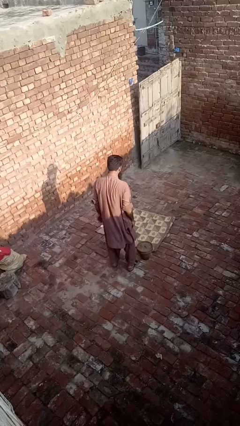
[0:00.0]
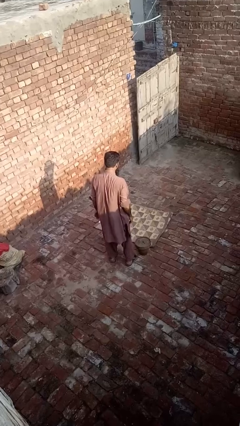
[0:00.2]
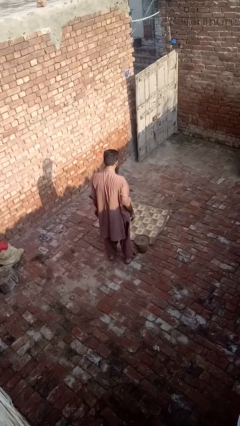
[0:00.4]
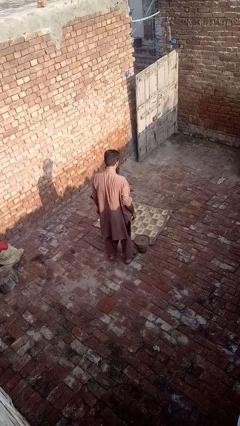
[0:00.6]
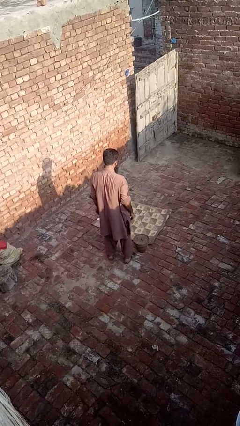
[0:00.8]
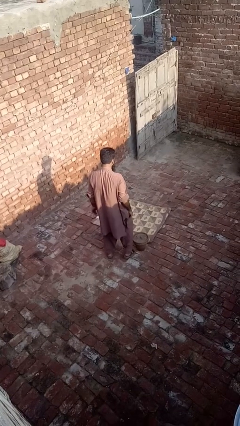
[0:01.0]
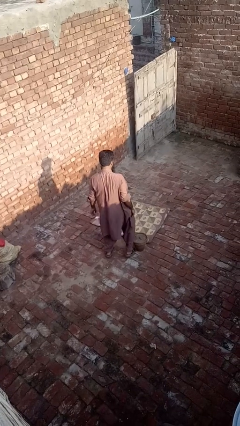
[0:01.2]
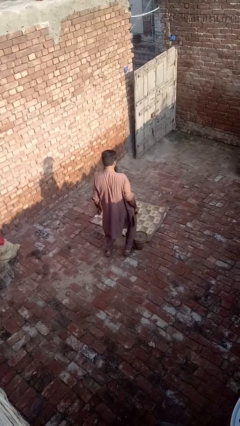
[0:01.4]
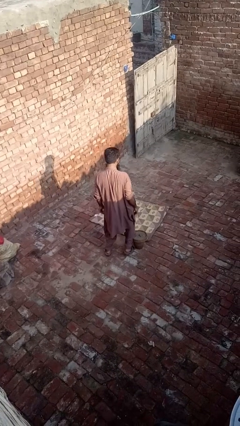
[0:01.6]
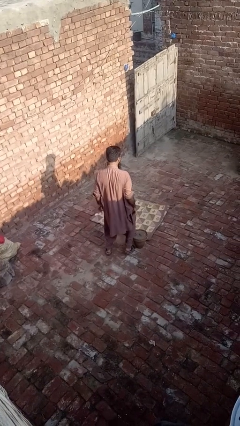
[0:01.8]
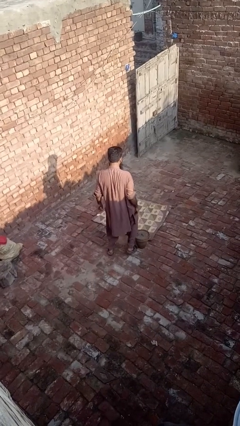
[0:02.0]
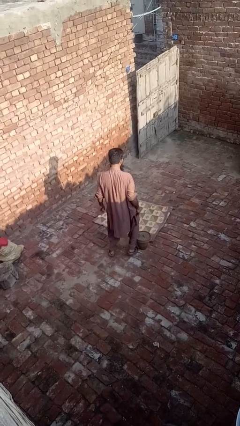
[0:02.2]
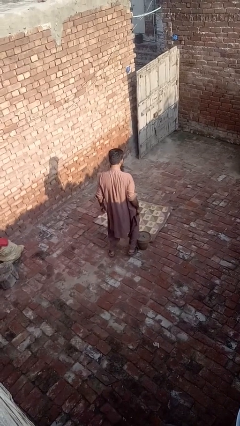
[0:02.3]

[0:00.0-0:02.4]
person trips on object on floor

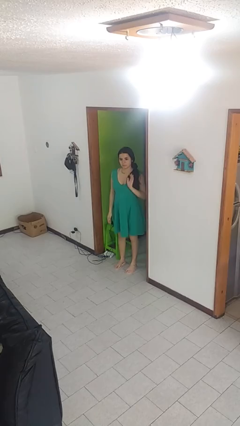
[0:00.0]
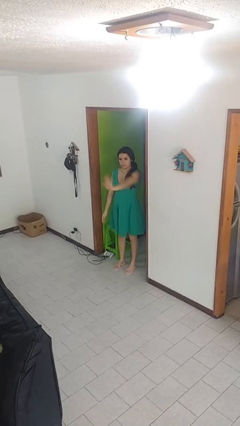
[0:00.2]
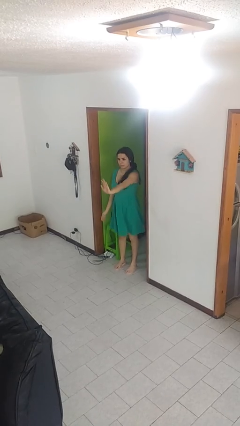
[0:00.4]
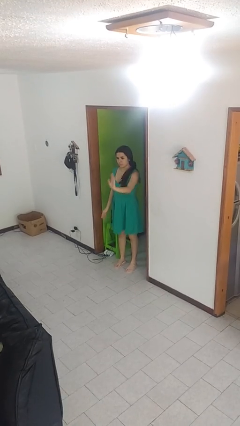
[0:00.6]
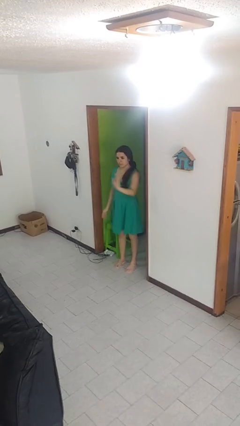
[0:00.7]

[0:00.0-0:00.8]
person gestures stop

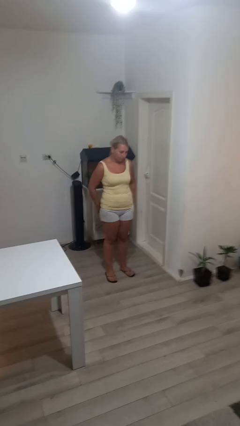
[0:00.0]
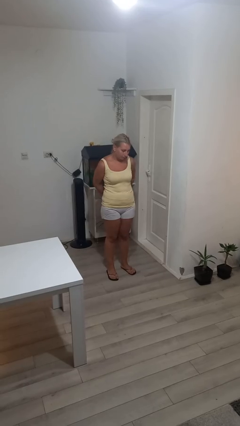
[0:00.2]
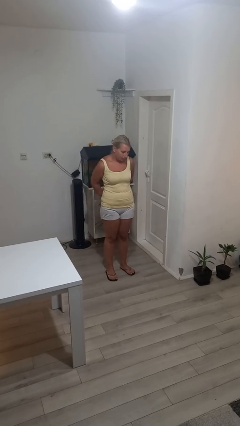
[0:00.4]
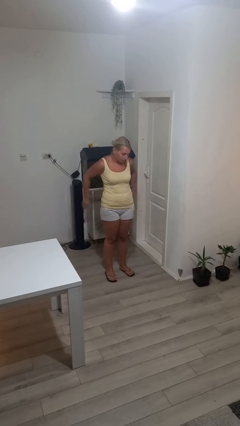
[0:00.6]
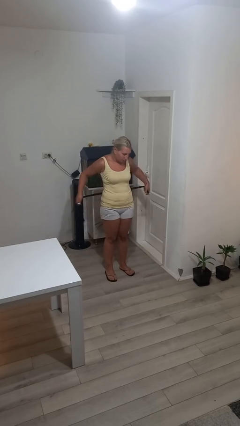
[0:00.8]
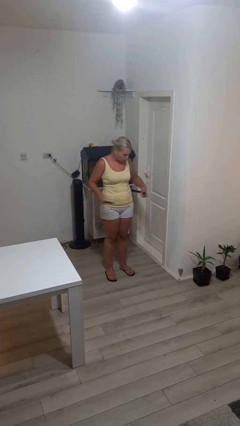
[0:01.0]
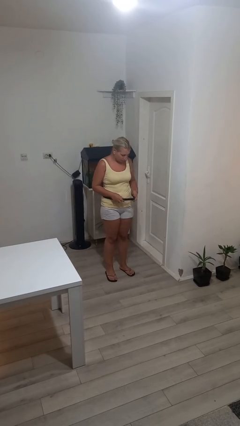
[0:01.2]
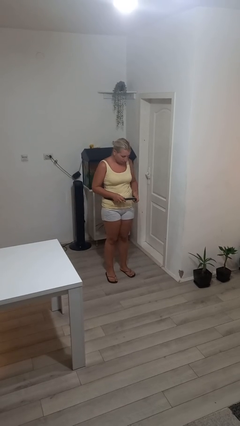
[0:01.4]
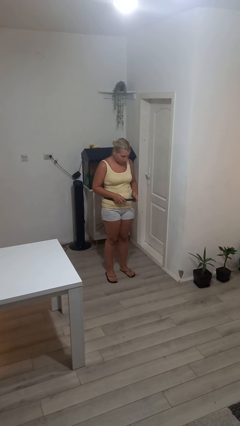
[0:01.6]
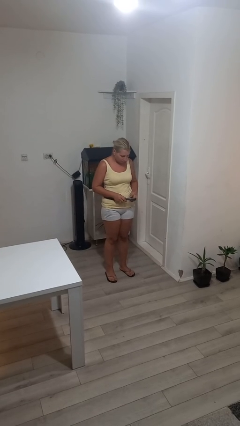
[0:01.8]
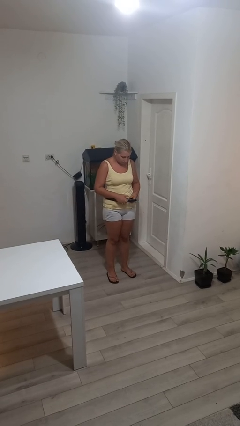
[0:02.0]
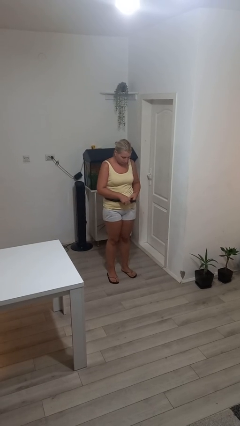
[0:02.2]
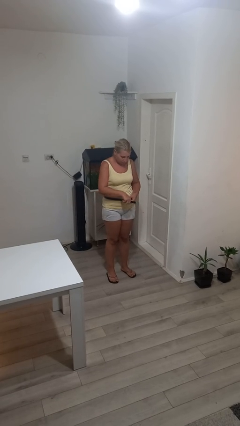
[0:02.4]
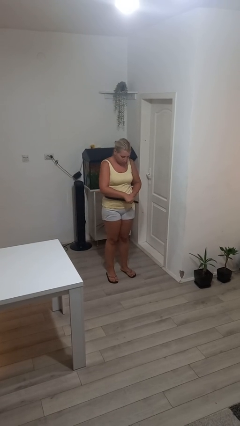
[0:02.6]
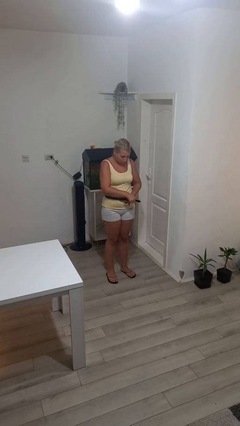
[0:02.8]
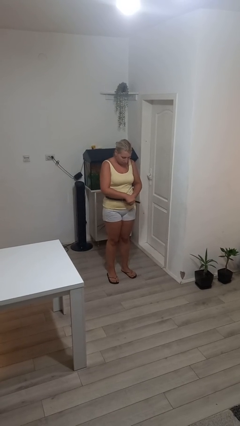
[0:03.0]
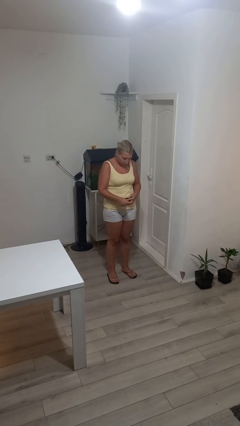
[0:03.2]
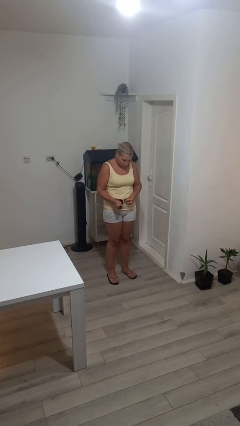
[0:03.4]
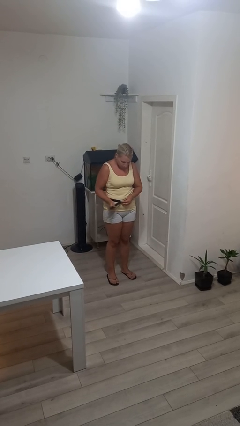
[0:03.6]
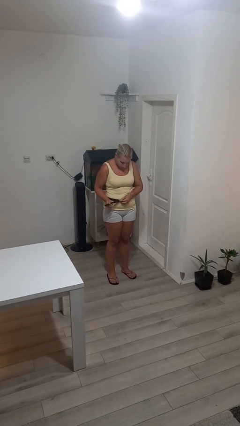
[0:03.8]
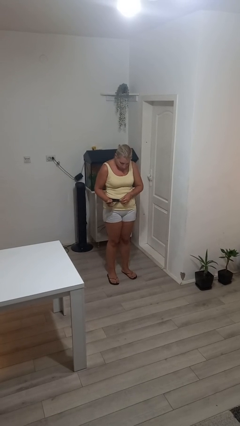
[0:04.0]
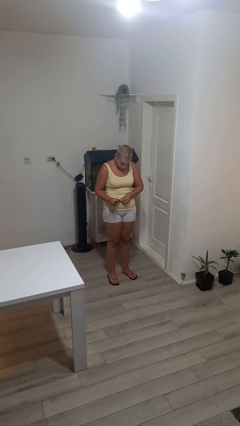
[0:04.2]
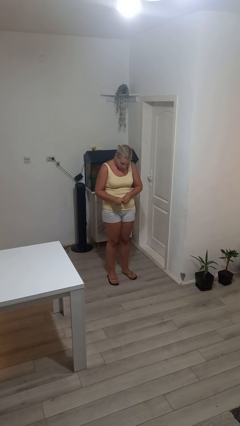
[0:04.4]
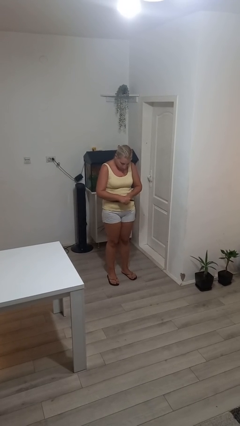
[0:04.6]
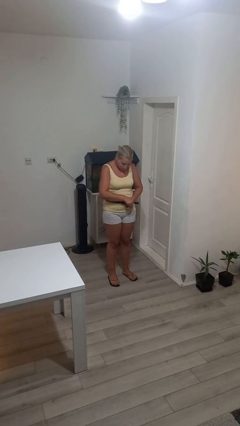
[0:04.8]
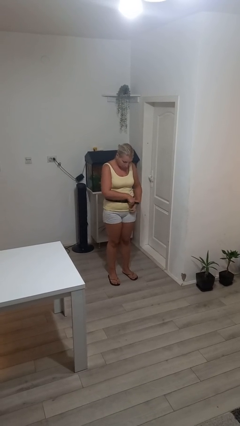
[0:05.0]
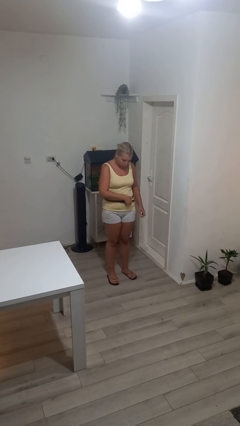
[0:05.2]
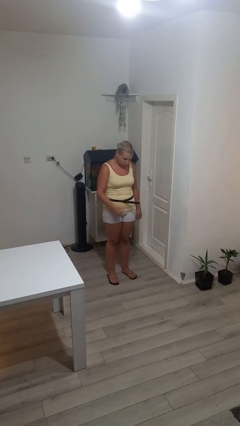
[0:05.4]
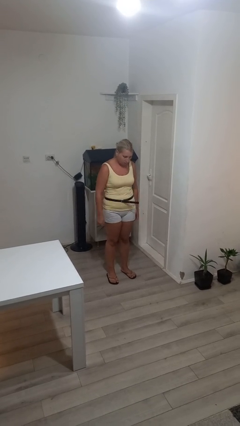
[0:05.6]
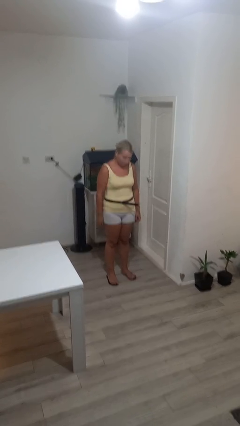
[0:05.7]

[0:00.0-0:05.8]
person puts on belt

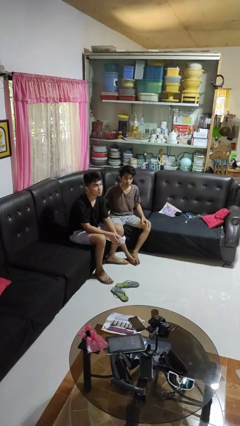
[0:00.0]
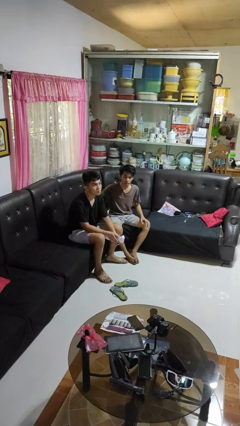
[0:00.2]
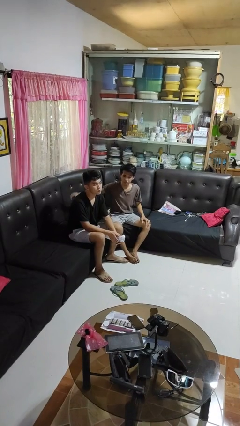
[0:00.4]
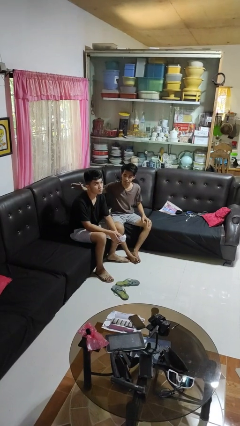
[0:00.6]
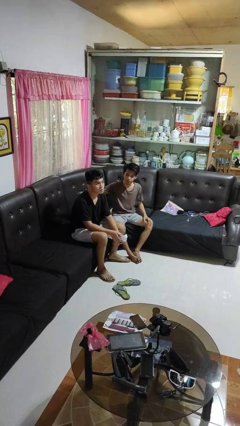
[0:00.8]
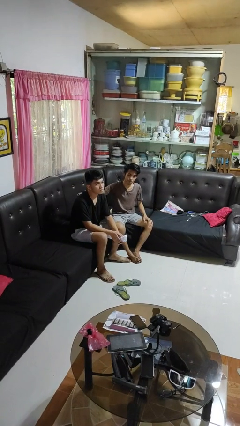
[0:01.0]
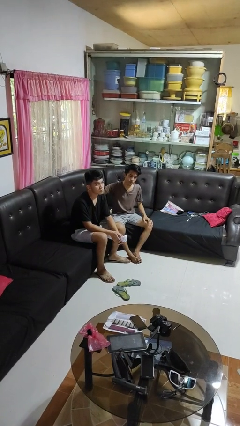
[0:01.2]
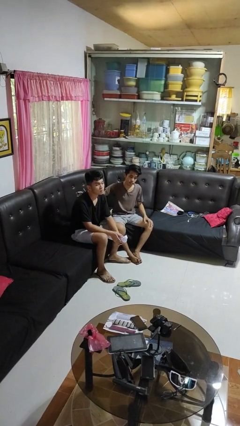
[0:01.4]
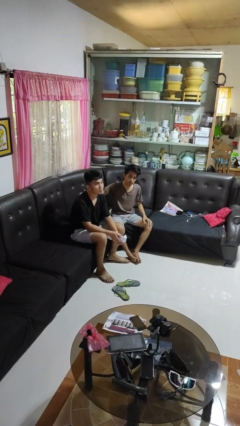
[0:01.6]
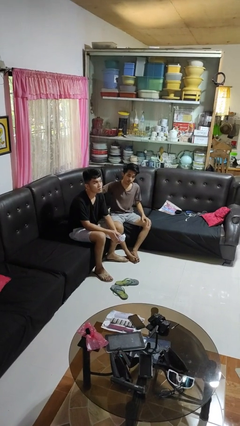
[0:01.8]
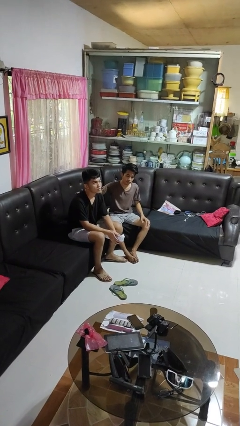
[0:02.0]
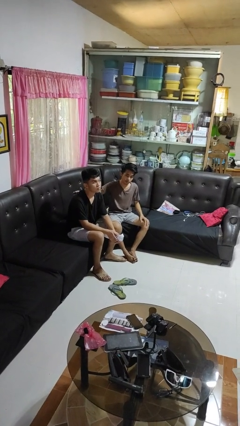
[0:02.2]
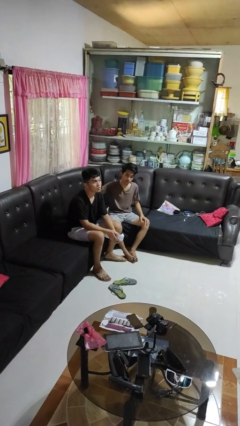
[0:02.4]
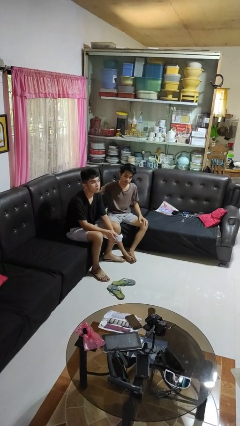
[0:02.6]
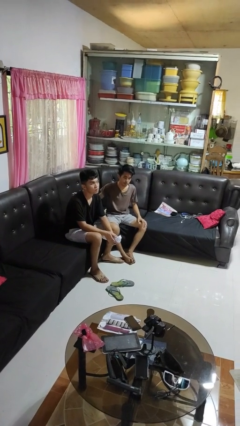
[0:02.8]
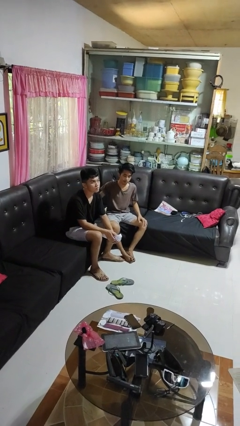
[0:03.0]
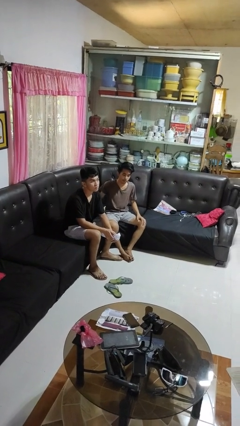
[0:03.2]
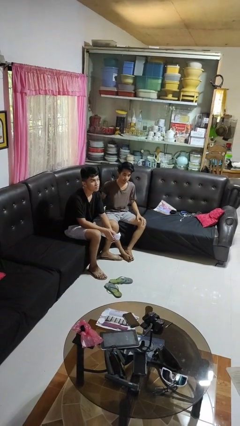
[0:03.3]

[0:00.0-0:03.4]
person touches back of person

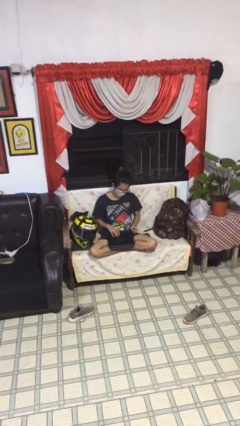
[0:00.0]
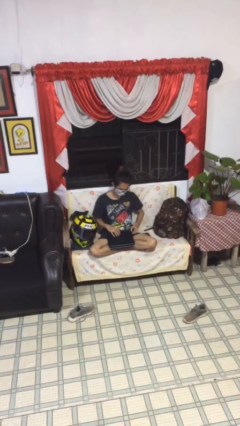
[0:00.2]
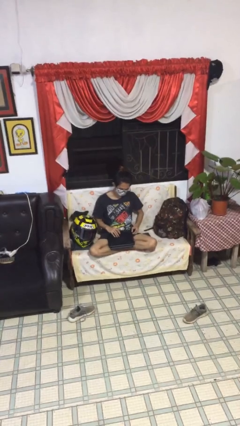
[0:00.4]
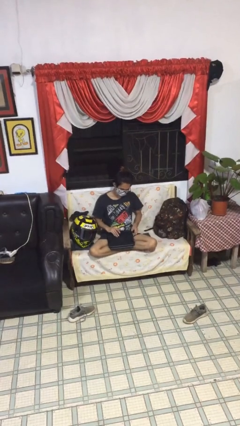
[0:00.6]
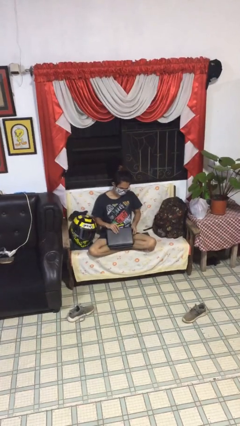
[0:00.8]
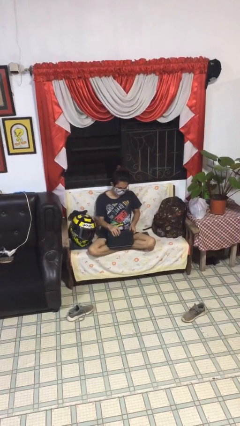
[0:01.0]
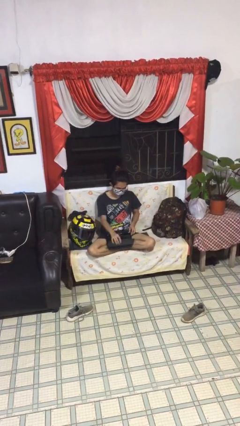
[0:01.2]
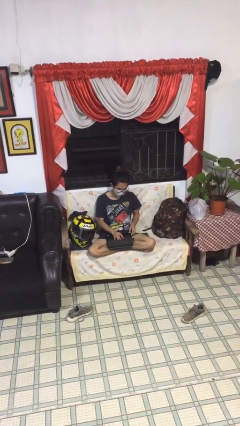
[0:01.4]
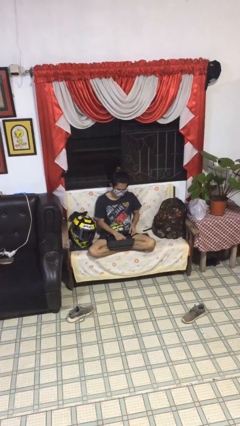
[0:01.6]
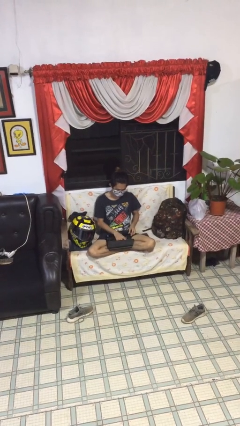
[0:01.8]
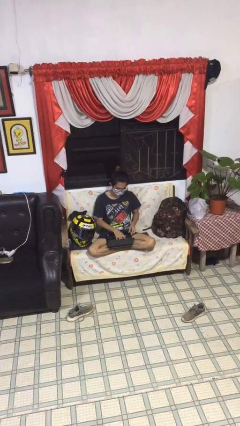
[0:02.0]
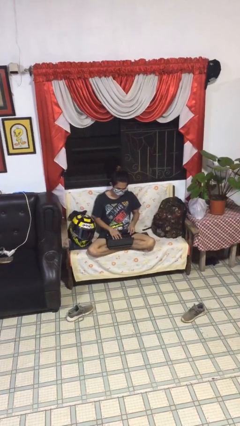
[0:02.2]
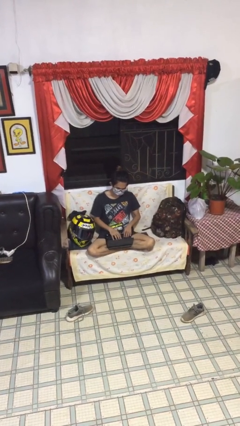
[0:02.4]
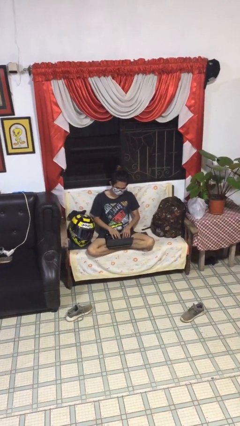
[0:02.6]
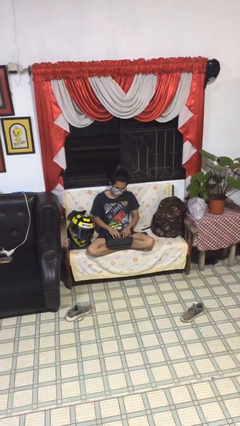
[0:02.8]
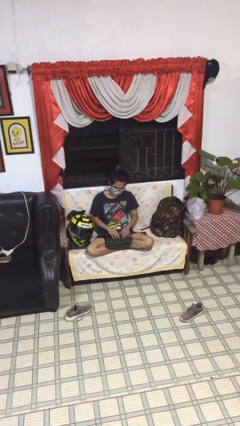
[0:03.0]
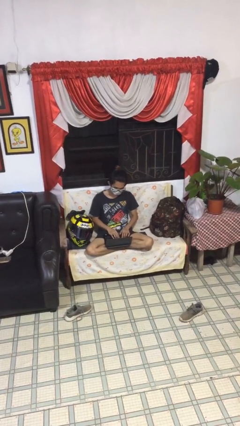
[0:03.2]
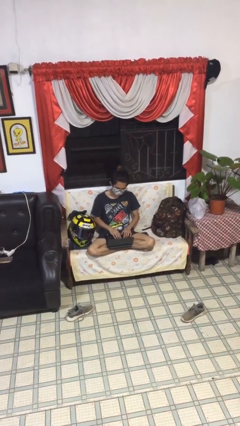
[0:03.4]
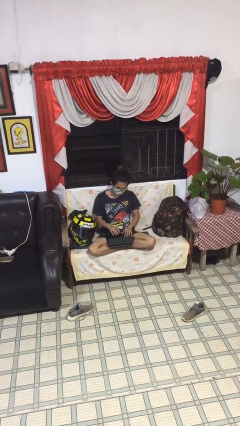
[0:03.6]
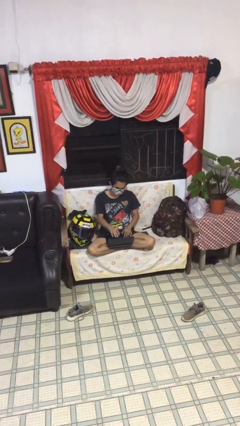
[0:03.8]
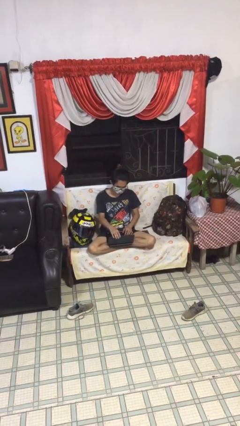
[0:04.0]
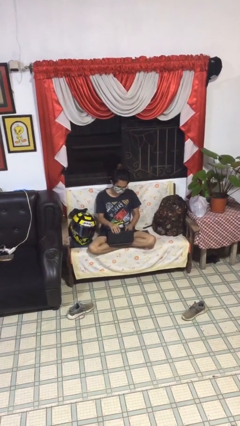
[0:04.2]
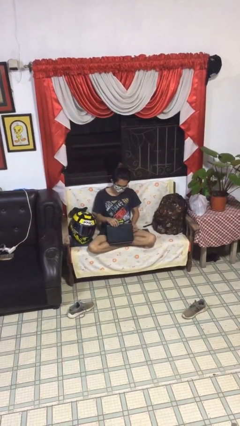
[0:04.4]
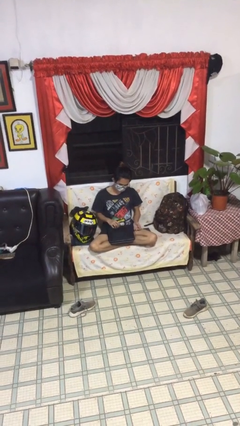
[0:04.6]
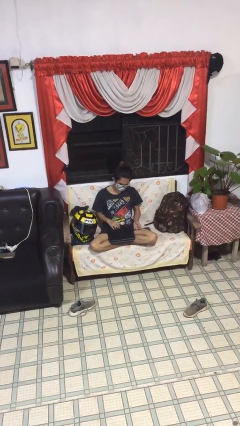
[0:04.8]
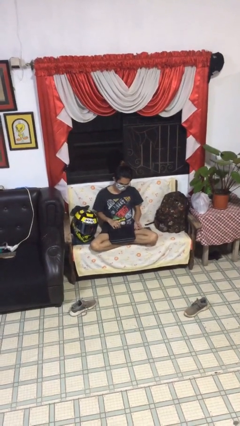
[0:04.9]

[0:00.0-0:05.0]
person interacts with laptop

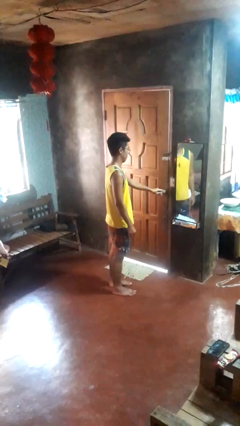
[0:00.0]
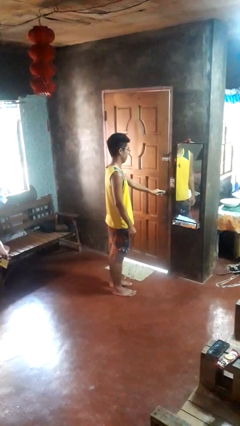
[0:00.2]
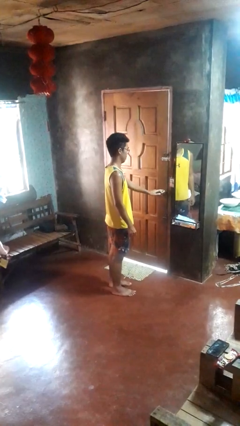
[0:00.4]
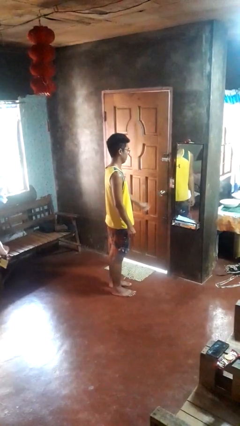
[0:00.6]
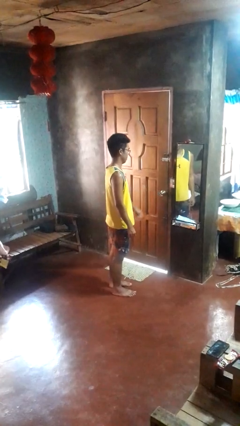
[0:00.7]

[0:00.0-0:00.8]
person locks door with keys
